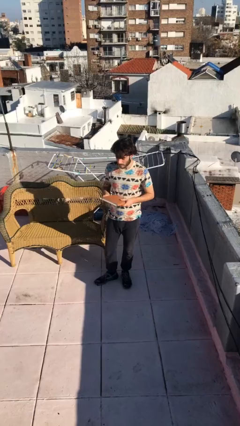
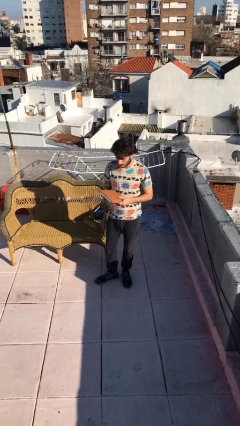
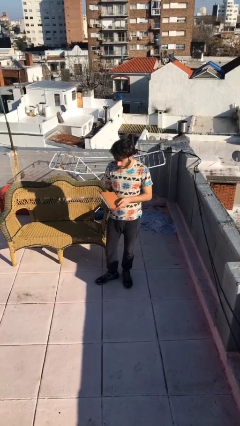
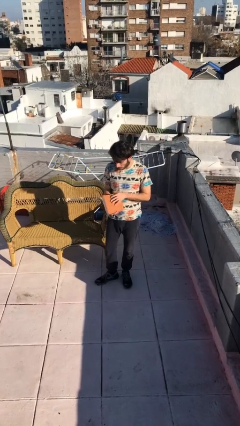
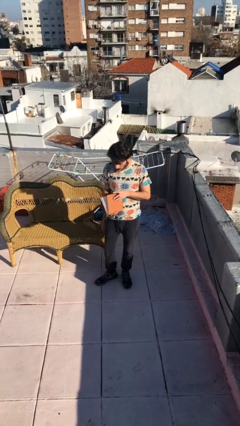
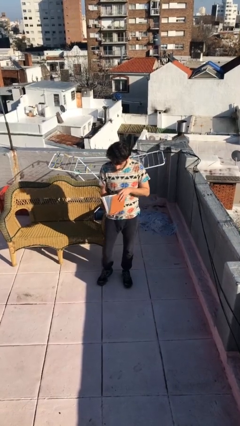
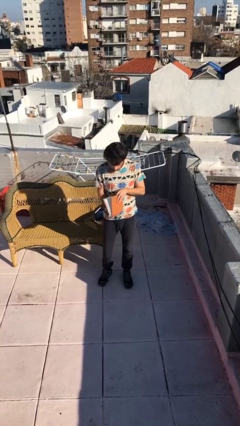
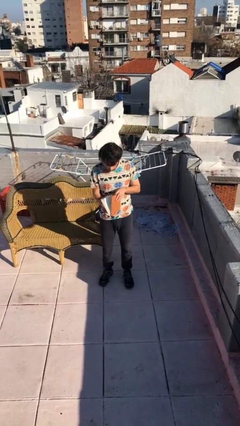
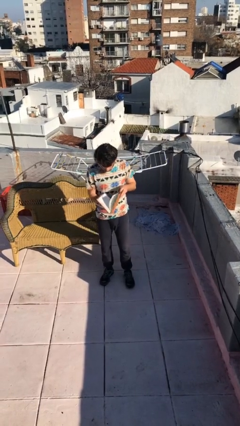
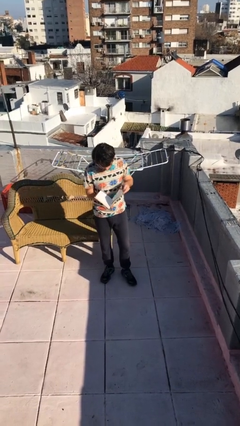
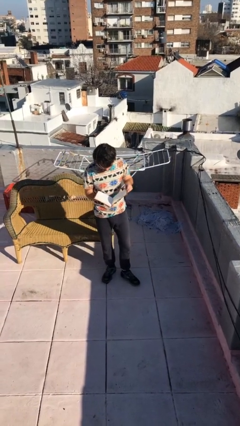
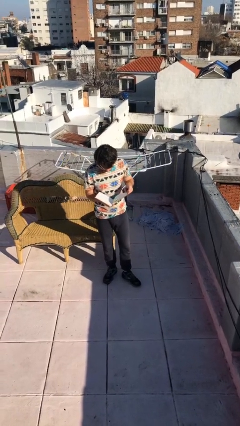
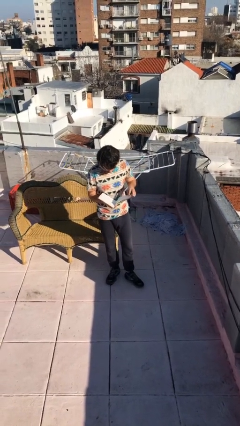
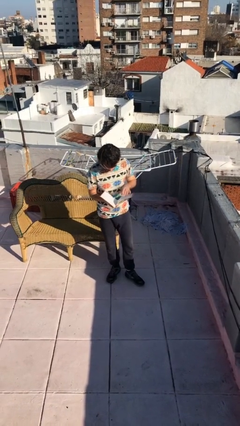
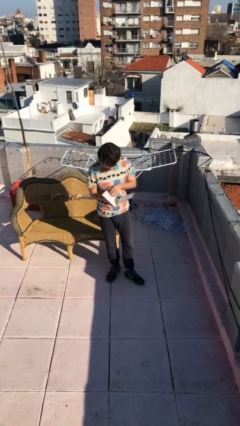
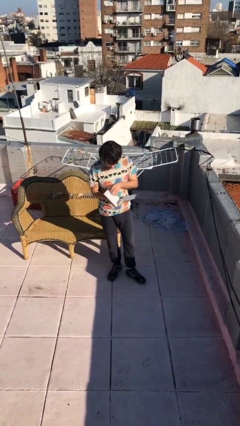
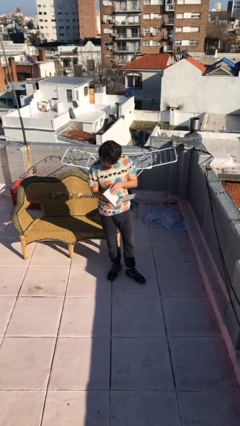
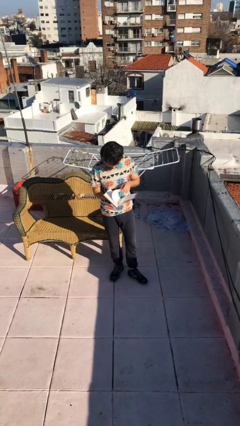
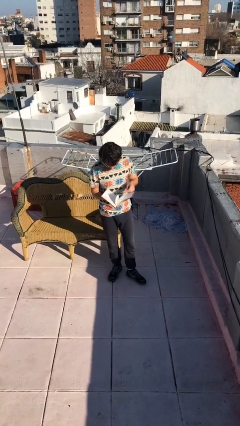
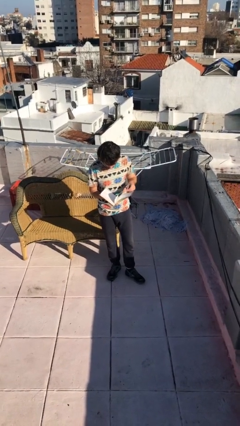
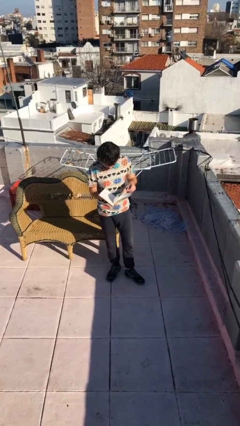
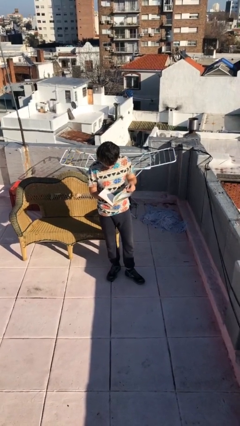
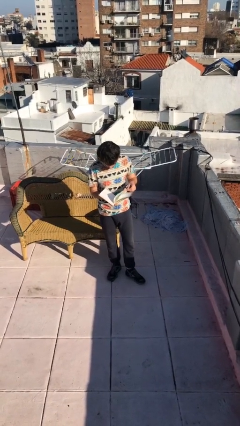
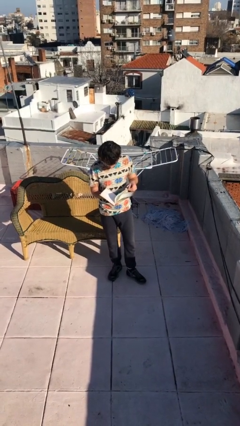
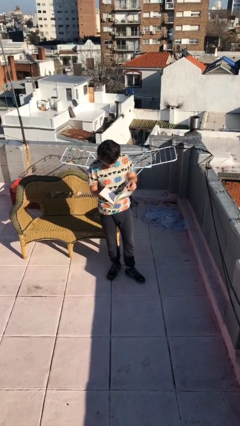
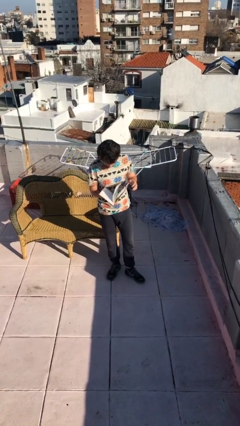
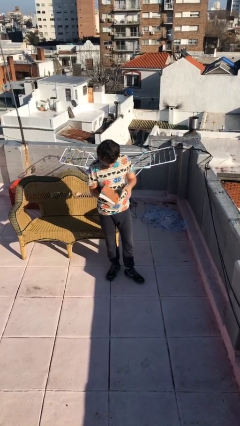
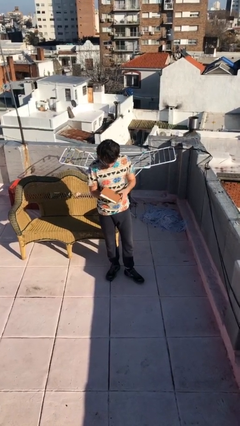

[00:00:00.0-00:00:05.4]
person reads book

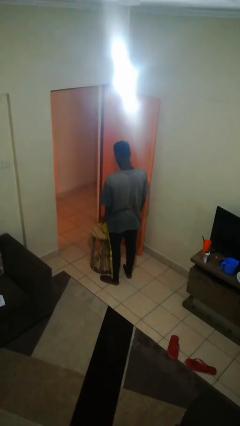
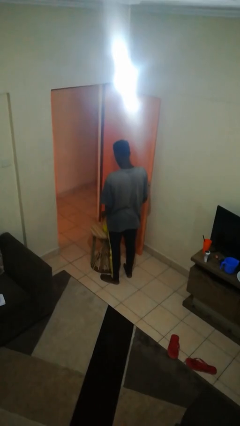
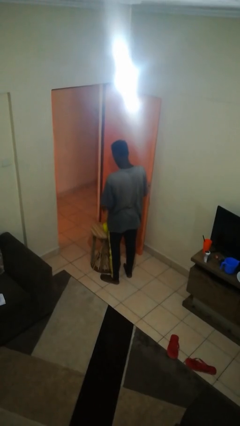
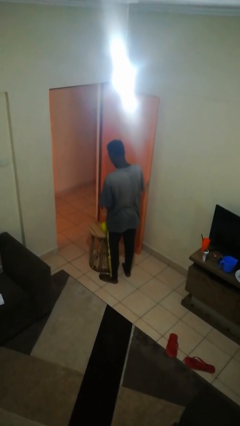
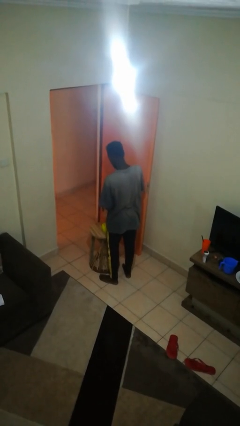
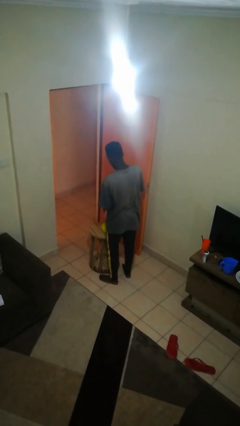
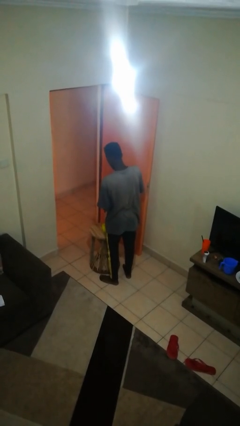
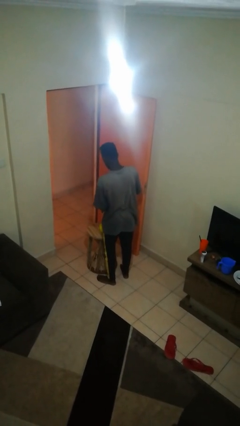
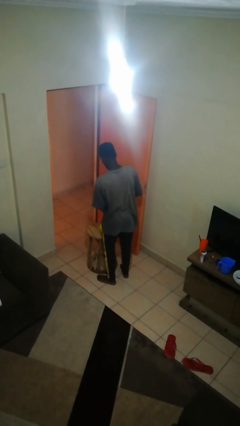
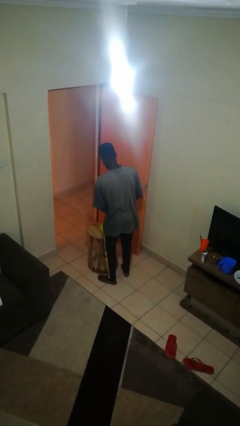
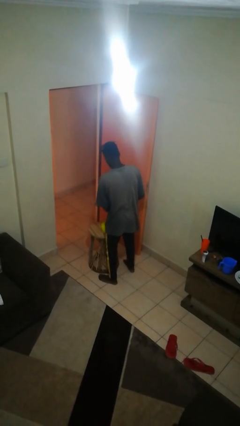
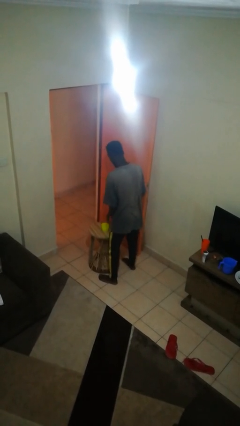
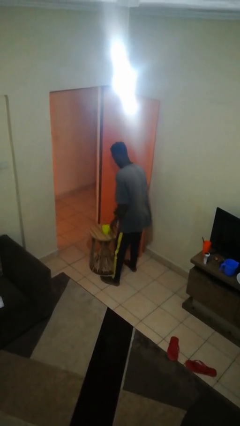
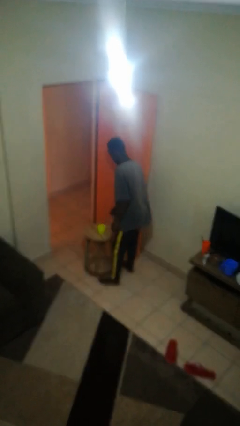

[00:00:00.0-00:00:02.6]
person screws lid to bottle

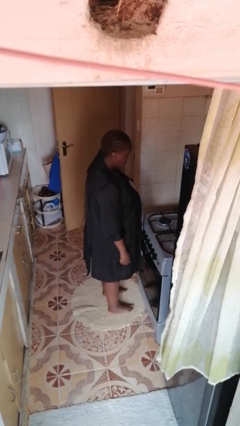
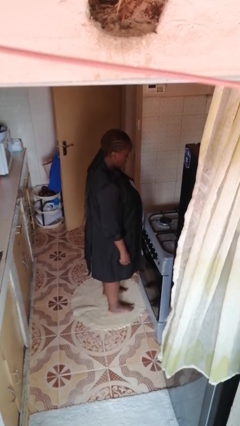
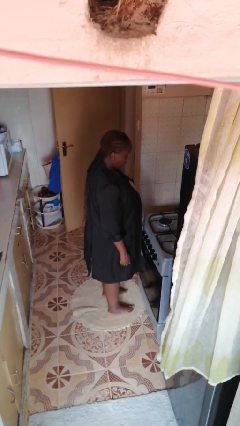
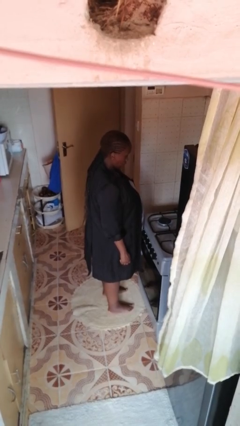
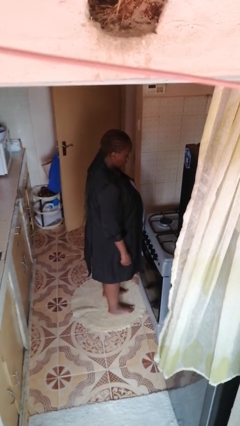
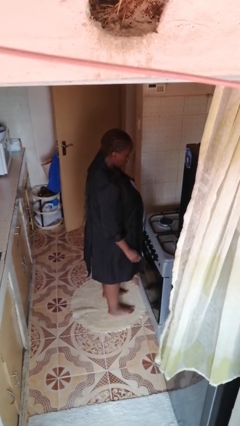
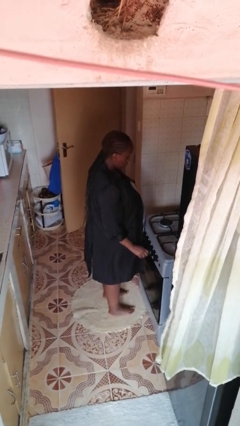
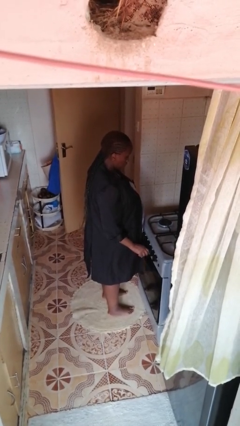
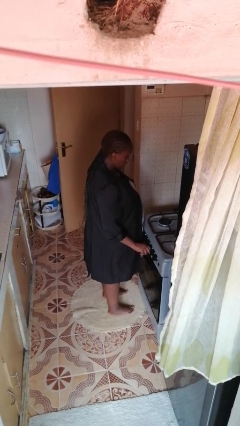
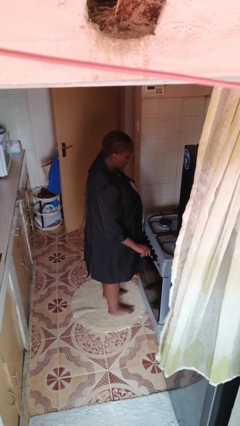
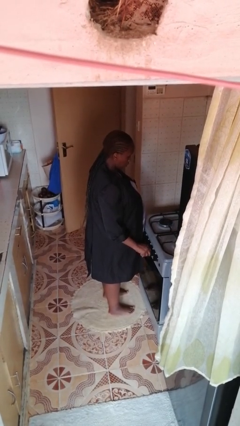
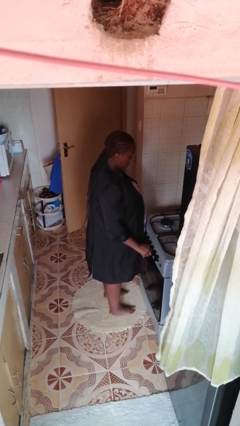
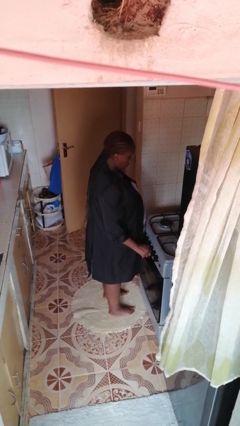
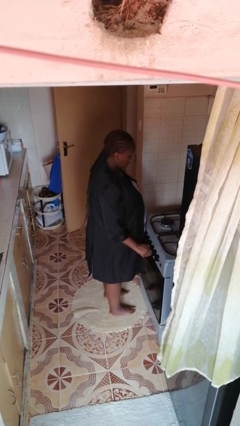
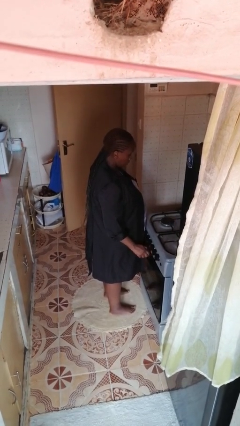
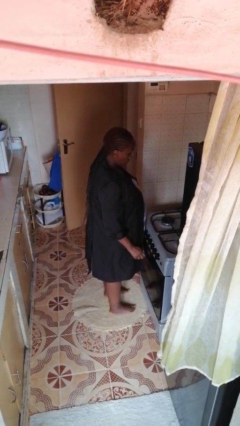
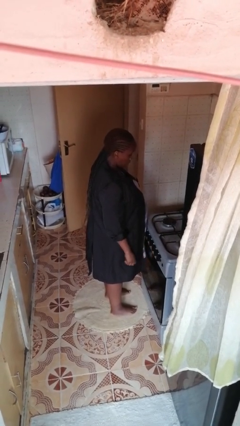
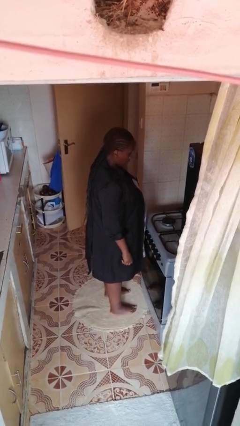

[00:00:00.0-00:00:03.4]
person turns off stovetop

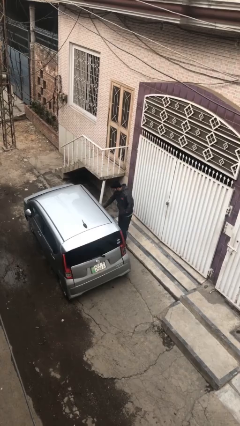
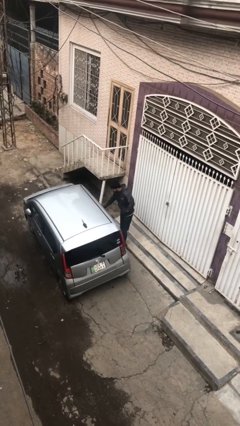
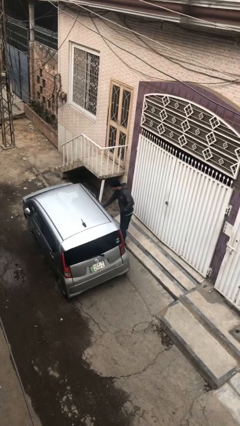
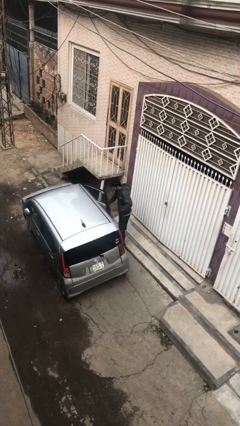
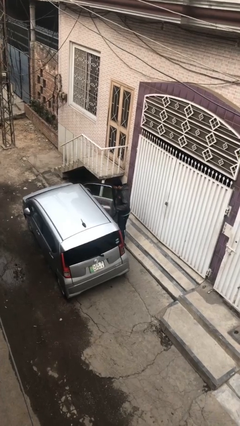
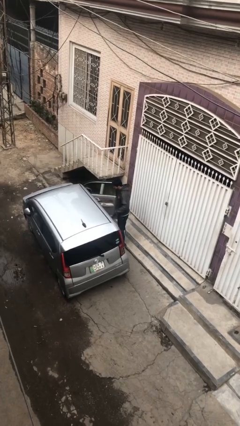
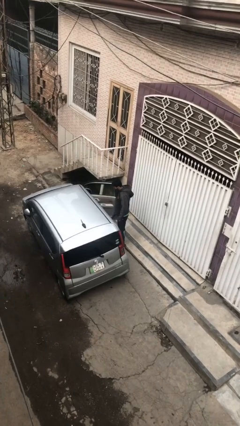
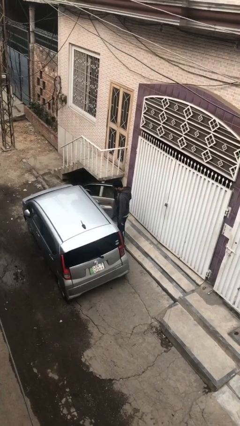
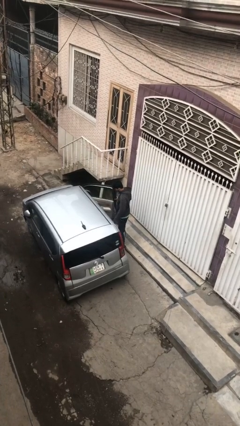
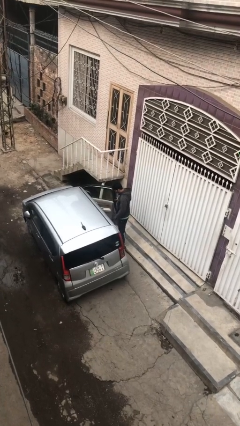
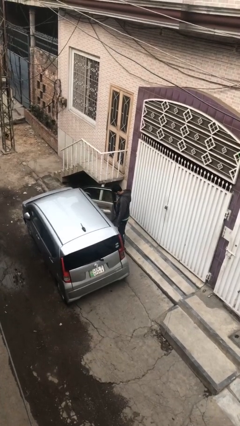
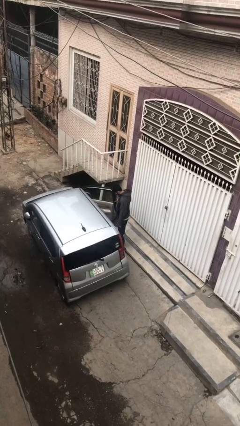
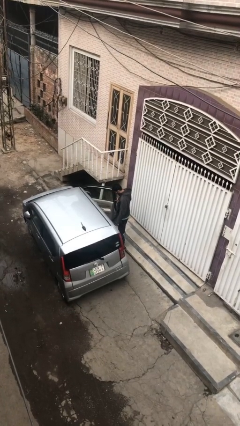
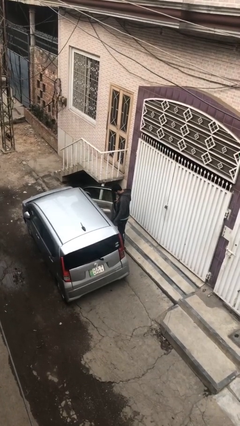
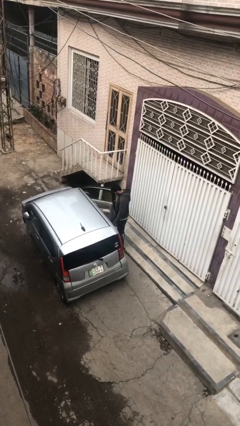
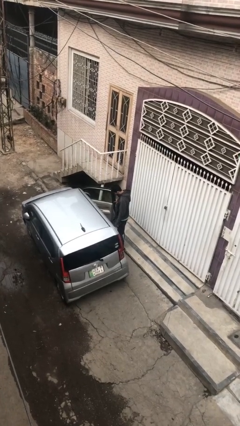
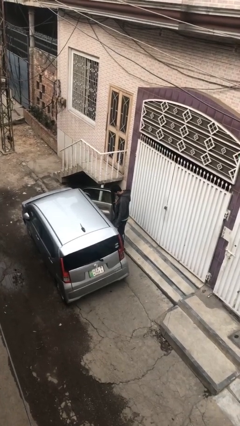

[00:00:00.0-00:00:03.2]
person opens car door

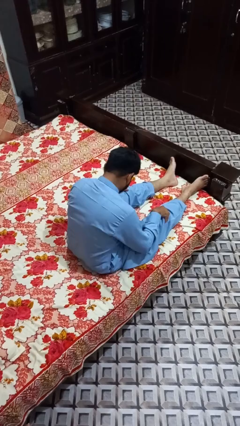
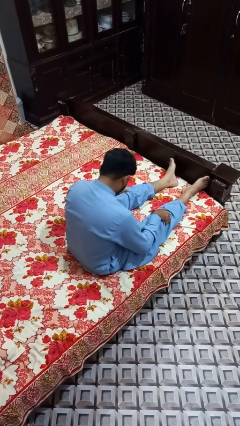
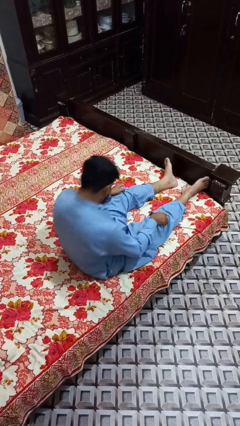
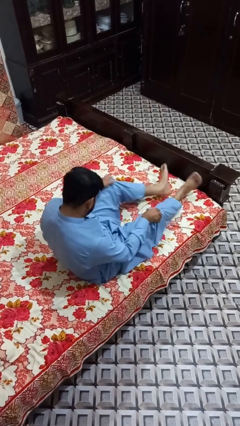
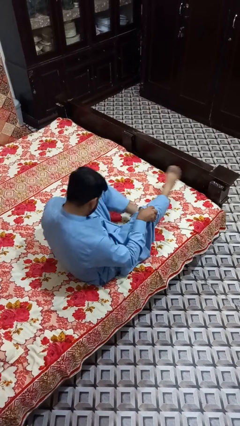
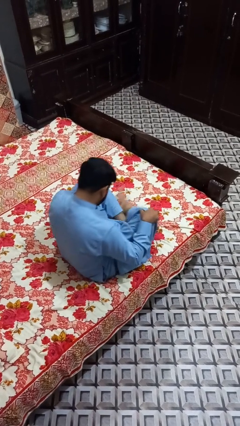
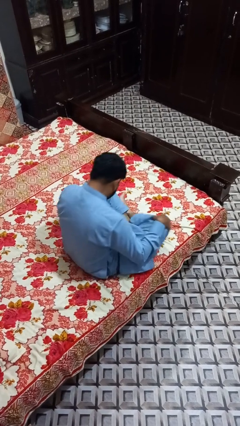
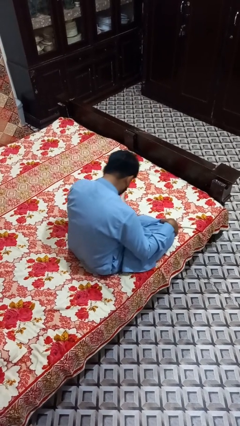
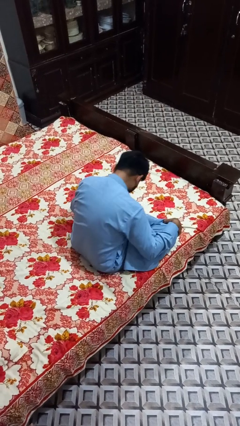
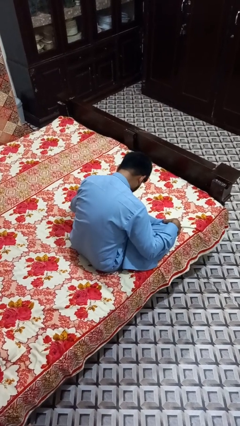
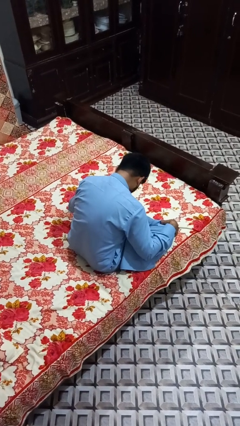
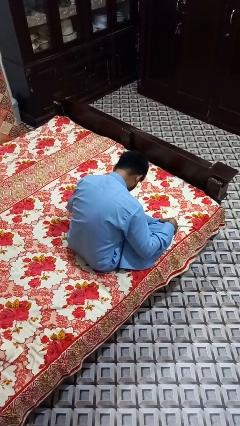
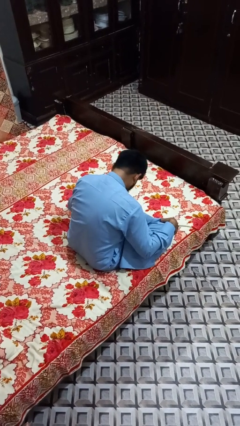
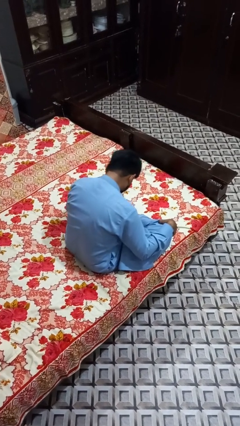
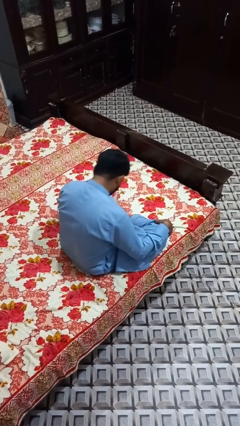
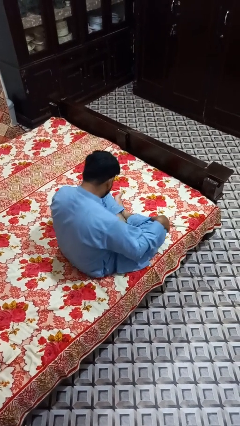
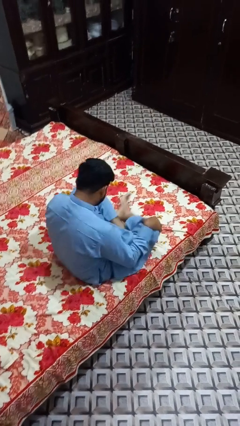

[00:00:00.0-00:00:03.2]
person crosses legs
